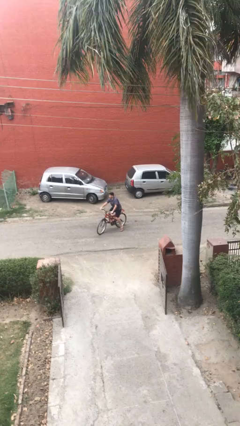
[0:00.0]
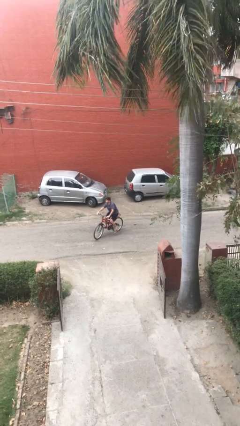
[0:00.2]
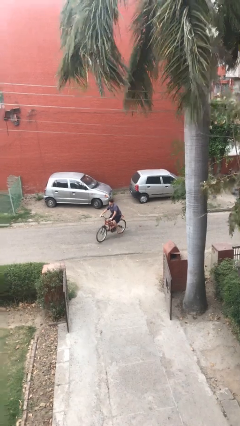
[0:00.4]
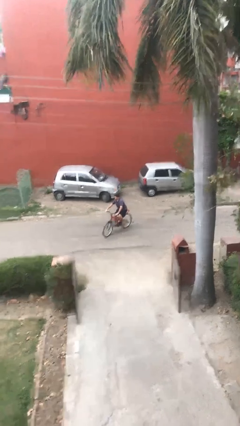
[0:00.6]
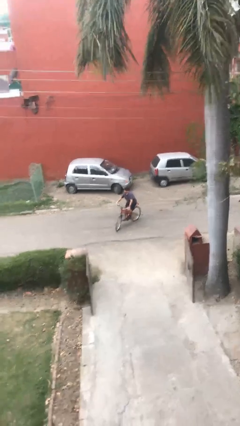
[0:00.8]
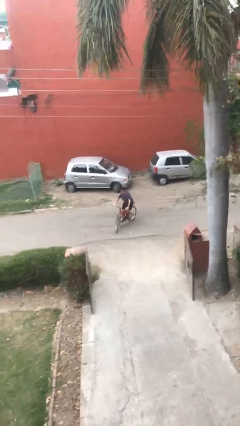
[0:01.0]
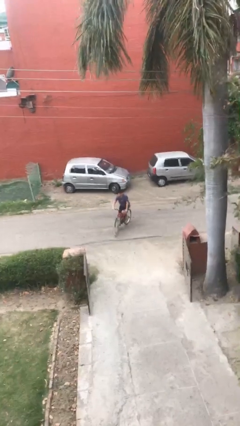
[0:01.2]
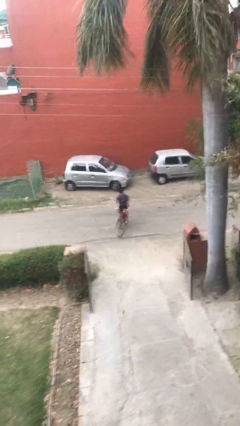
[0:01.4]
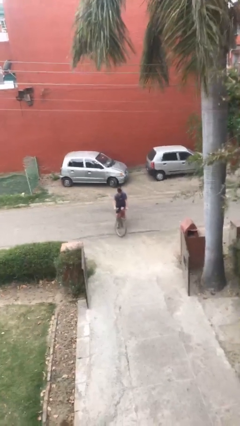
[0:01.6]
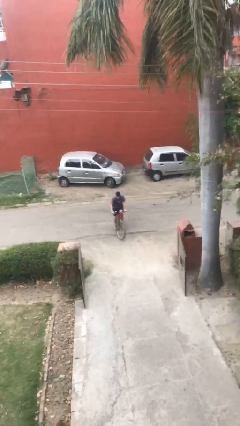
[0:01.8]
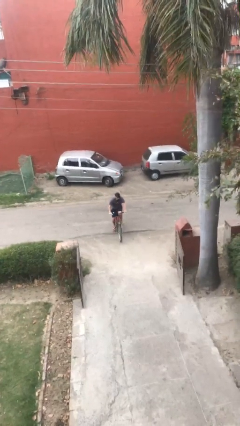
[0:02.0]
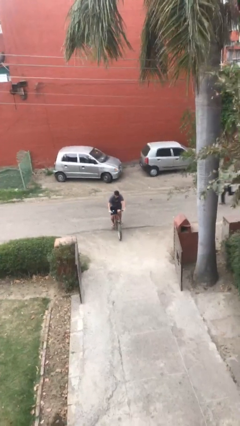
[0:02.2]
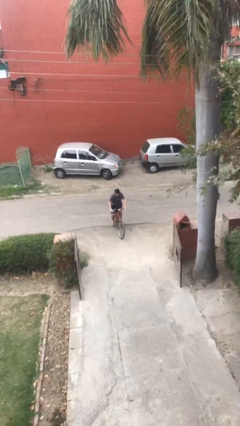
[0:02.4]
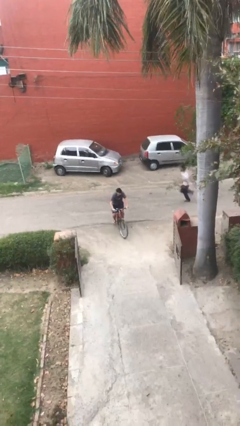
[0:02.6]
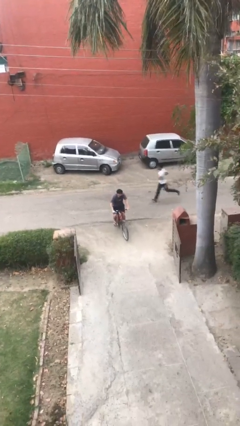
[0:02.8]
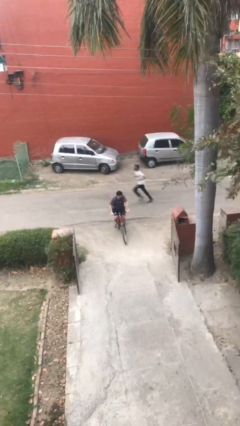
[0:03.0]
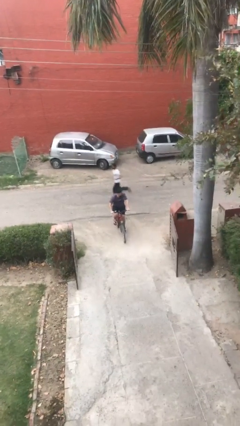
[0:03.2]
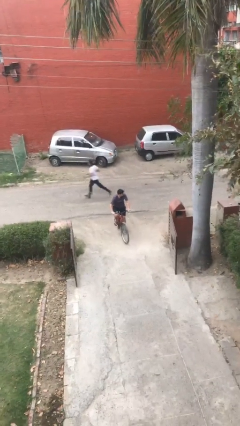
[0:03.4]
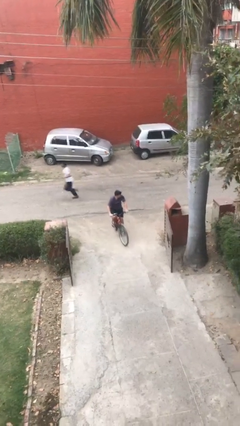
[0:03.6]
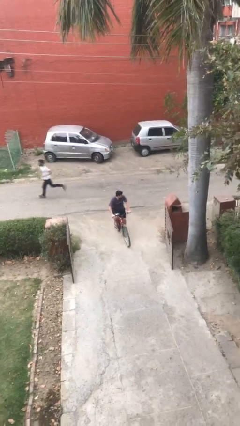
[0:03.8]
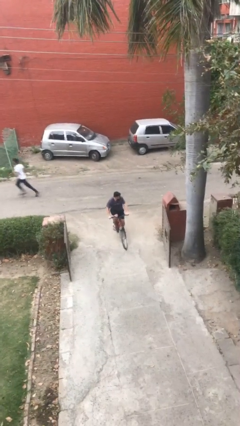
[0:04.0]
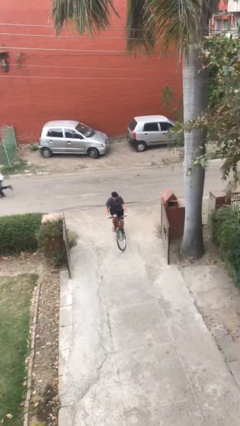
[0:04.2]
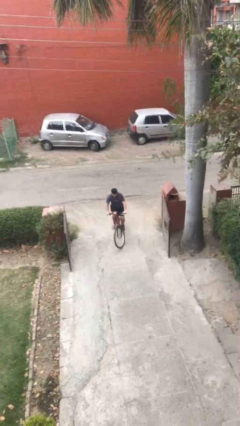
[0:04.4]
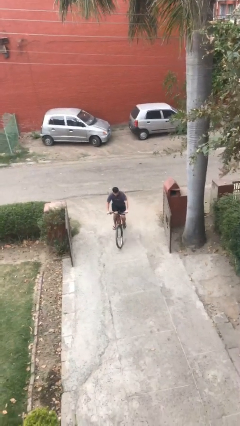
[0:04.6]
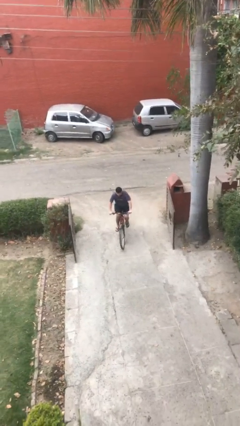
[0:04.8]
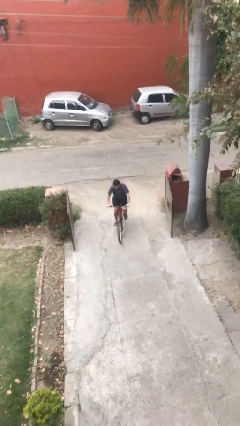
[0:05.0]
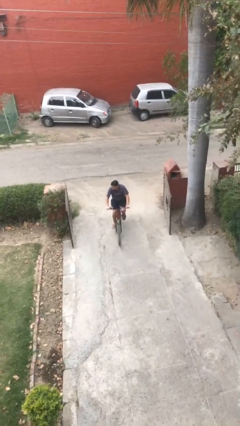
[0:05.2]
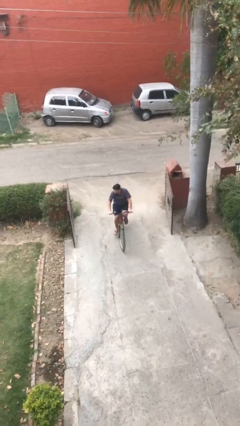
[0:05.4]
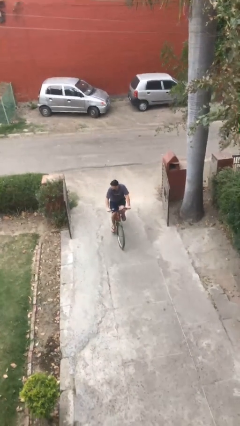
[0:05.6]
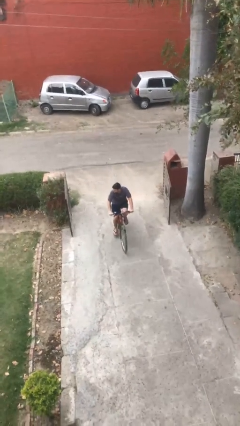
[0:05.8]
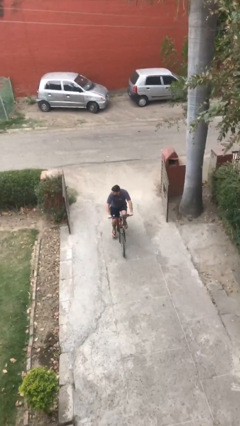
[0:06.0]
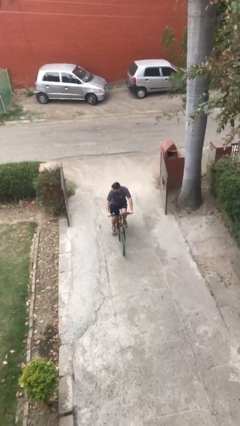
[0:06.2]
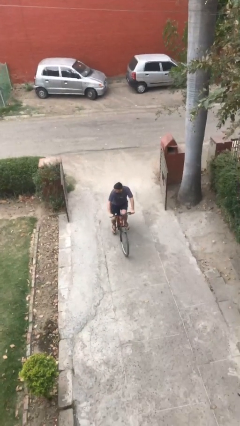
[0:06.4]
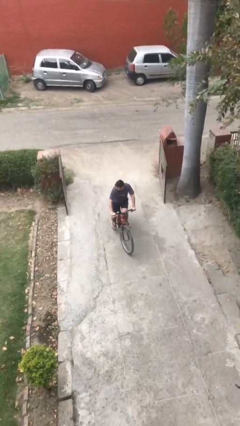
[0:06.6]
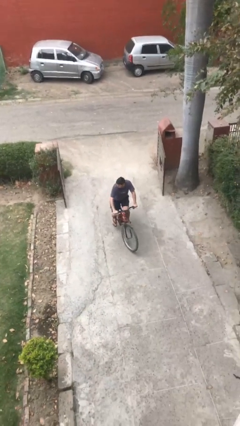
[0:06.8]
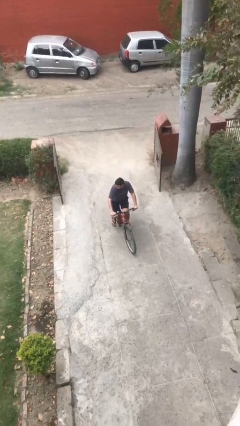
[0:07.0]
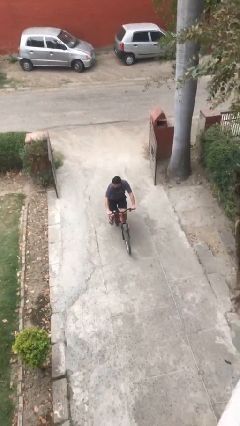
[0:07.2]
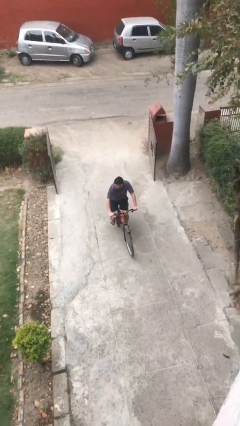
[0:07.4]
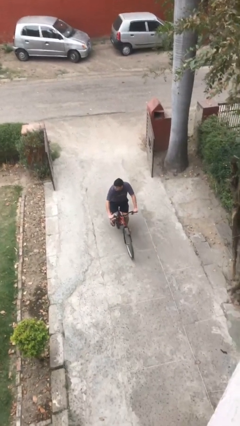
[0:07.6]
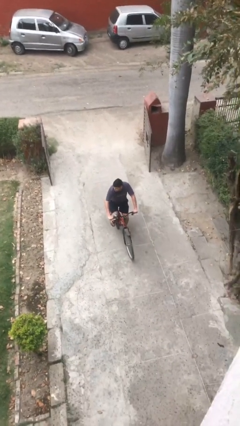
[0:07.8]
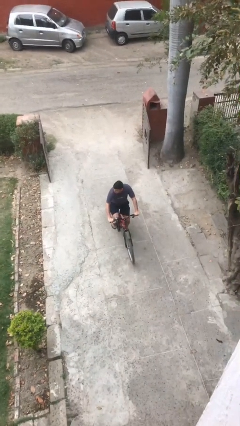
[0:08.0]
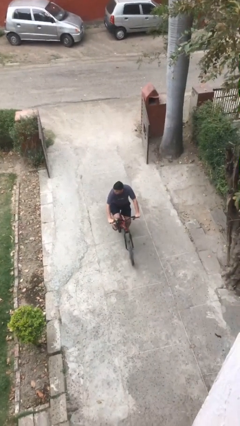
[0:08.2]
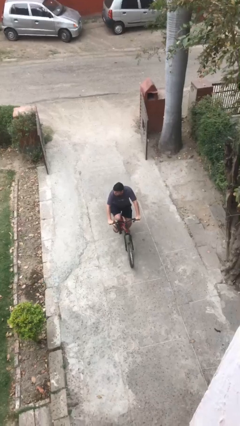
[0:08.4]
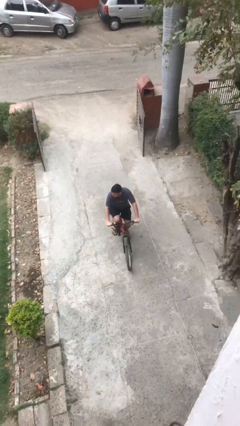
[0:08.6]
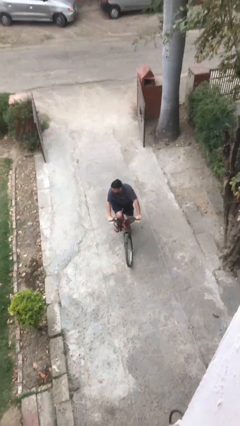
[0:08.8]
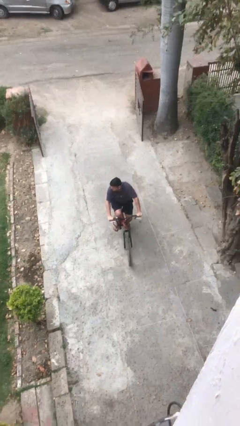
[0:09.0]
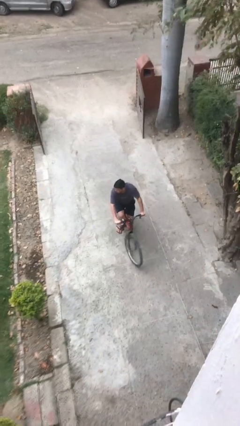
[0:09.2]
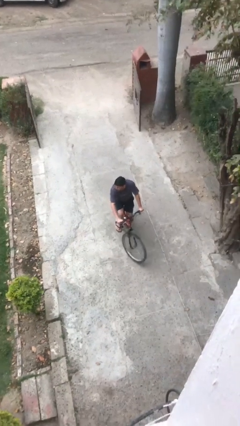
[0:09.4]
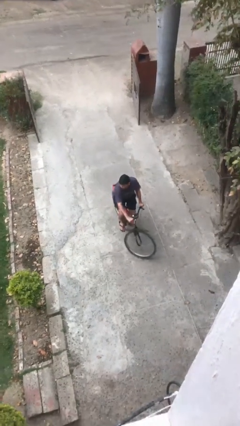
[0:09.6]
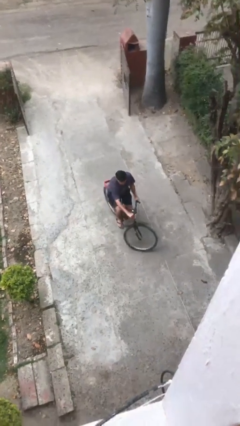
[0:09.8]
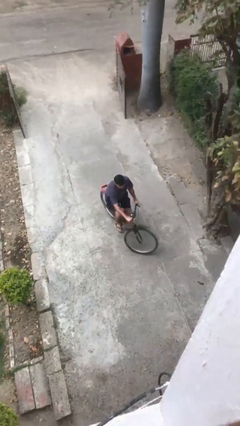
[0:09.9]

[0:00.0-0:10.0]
person rides bicycle

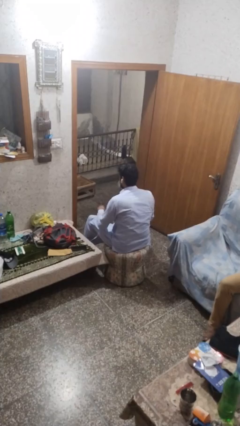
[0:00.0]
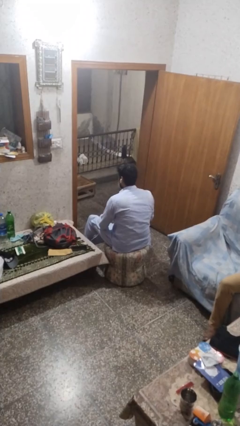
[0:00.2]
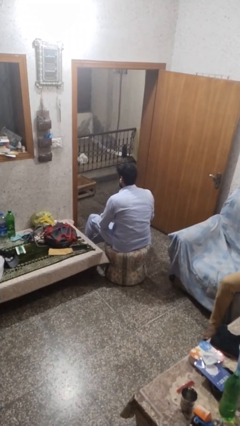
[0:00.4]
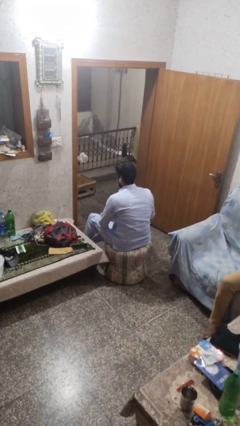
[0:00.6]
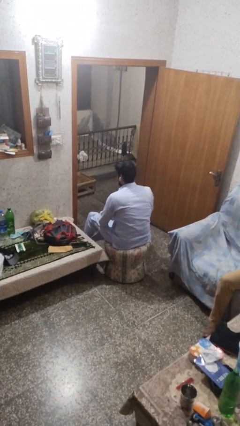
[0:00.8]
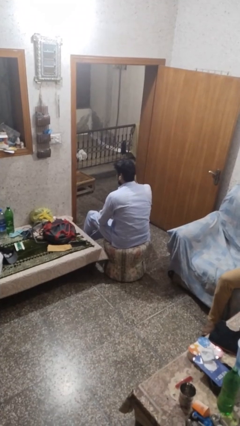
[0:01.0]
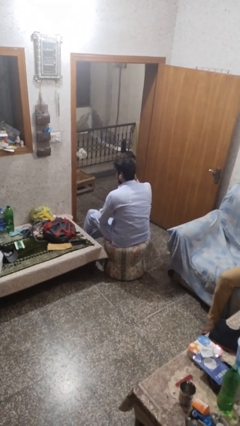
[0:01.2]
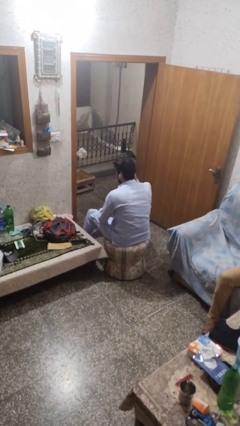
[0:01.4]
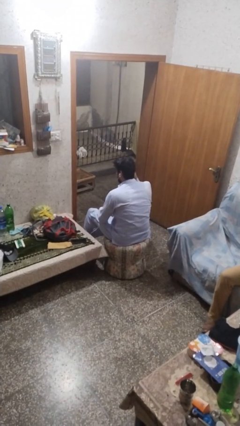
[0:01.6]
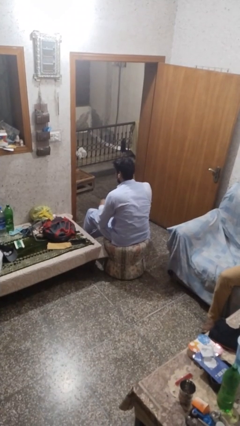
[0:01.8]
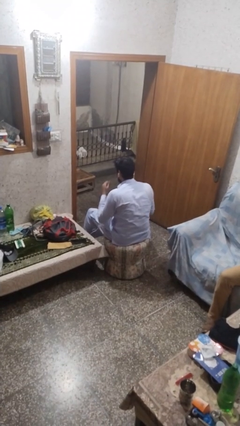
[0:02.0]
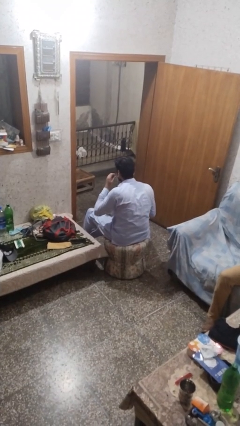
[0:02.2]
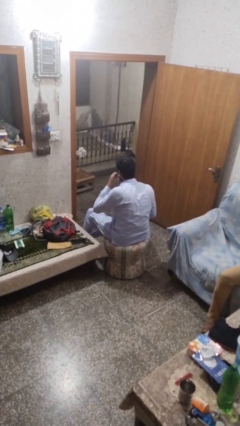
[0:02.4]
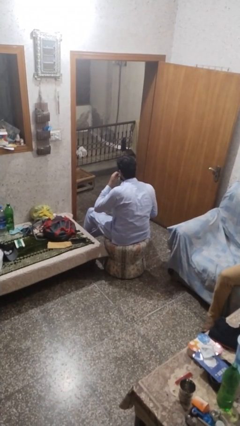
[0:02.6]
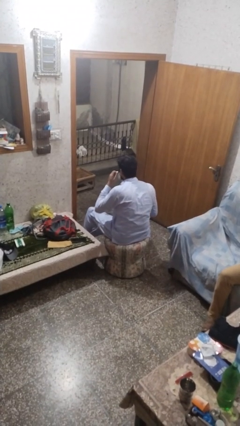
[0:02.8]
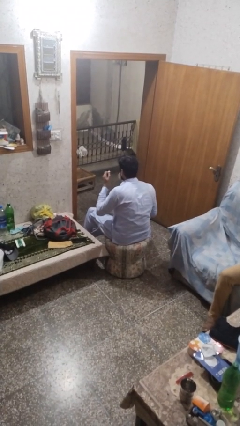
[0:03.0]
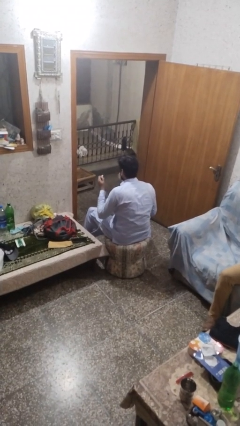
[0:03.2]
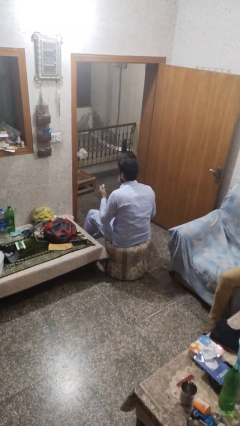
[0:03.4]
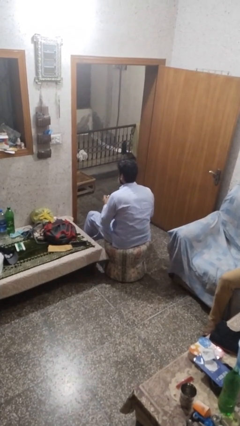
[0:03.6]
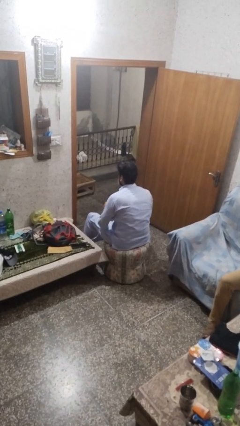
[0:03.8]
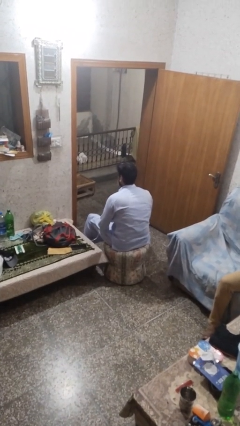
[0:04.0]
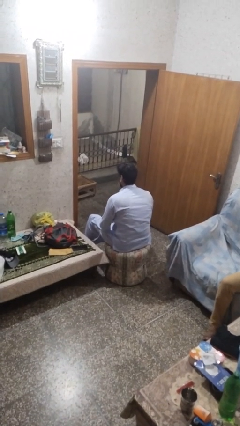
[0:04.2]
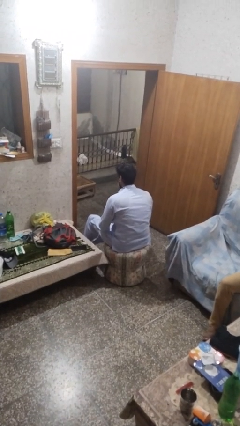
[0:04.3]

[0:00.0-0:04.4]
person takes off headphones

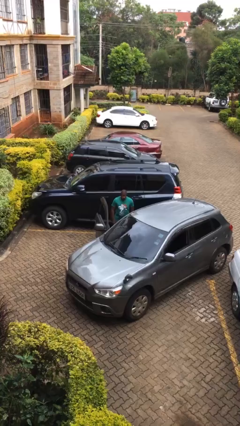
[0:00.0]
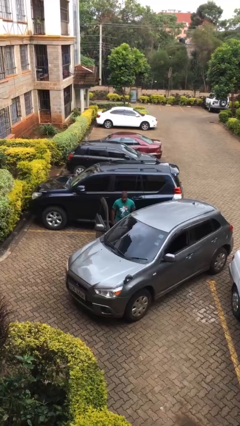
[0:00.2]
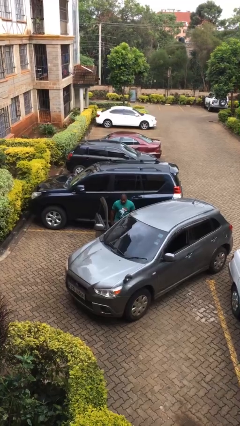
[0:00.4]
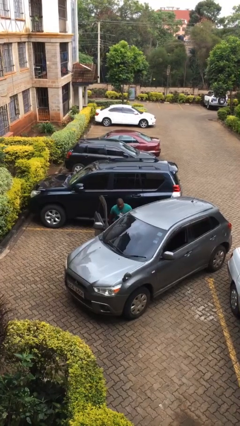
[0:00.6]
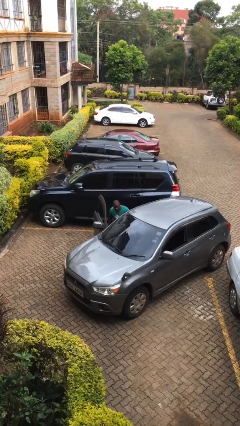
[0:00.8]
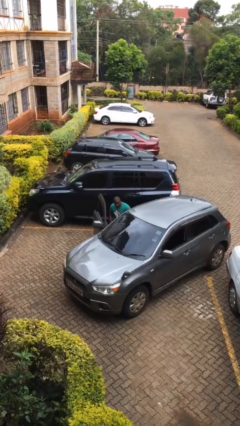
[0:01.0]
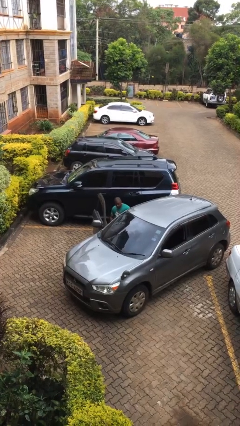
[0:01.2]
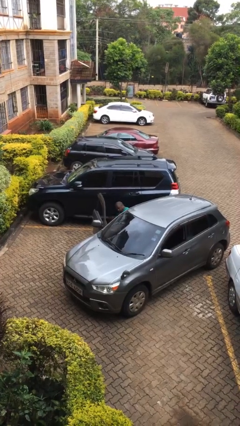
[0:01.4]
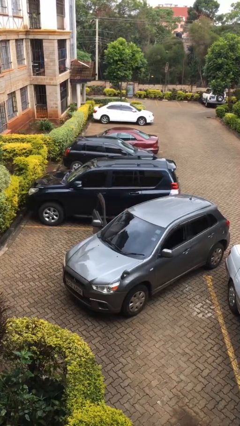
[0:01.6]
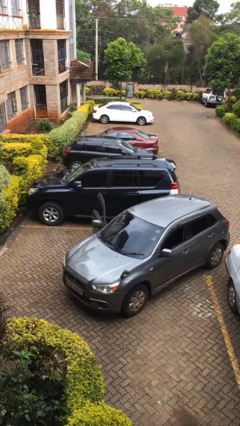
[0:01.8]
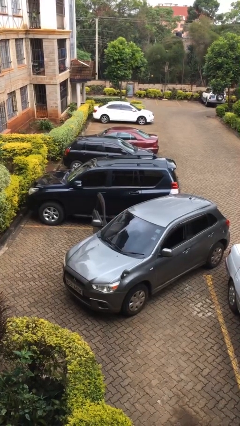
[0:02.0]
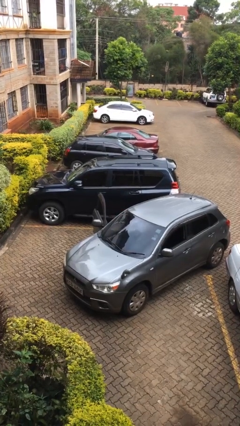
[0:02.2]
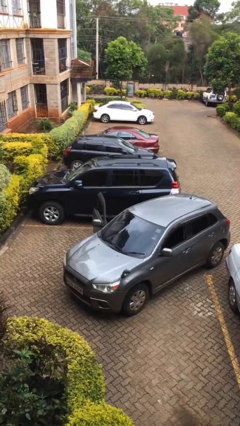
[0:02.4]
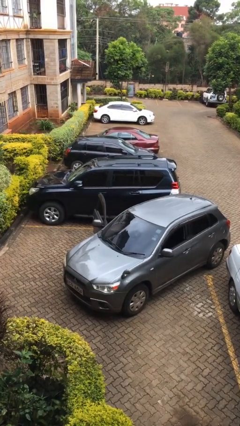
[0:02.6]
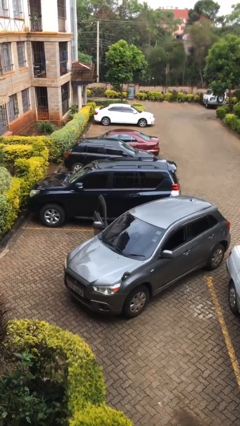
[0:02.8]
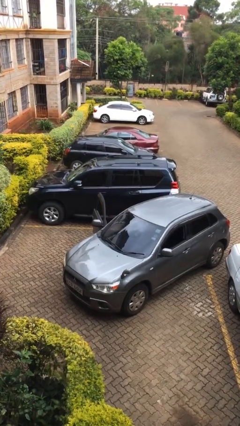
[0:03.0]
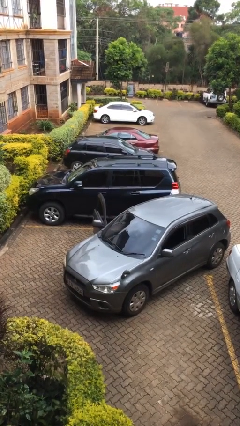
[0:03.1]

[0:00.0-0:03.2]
person enters car

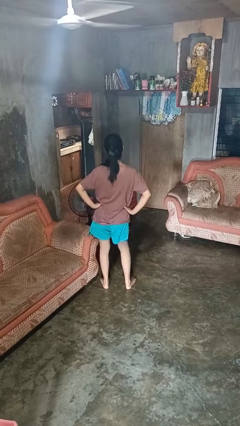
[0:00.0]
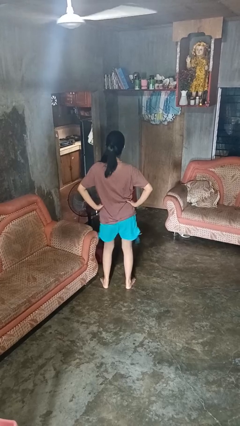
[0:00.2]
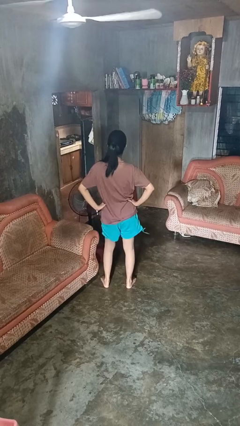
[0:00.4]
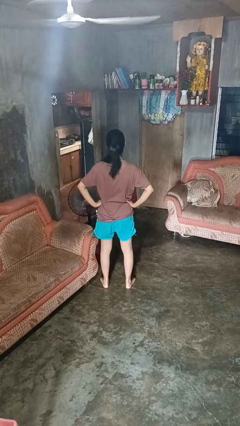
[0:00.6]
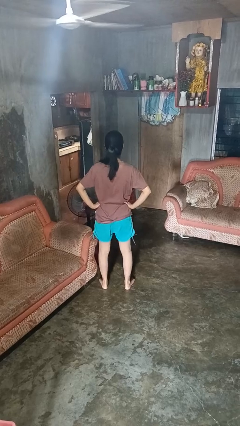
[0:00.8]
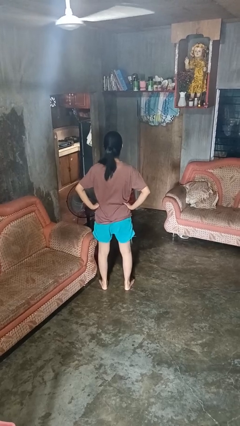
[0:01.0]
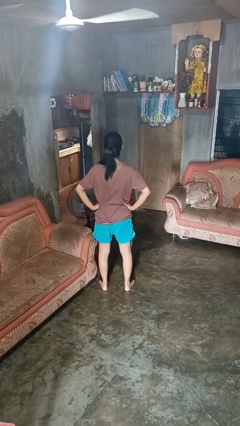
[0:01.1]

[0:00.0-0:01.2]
person wiggles hips
